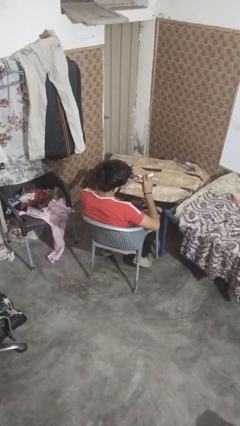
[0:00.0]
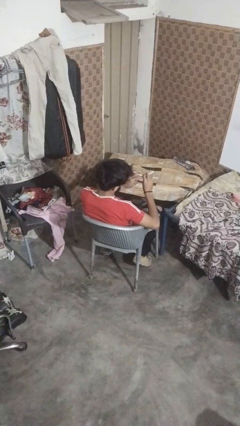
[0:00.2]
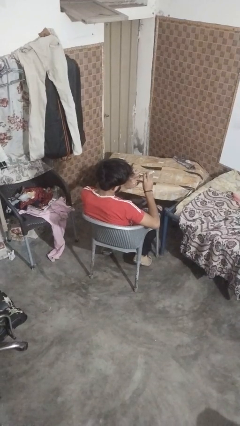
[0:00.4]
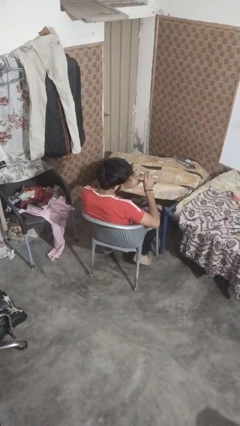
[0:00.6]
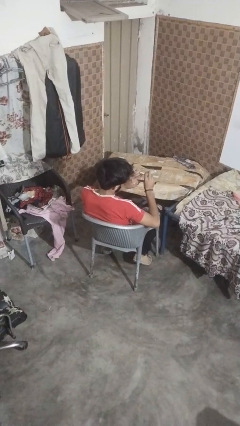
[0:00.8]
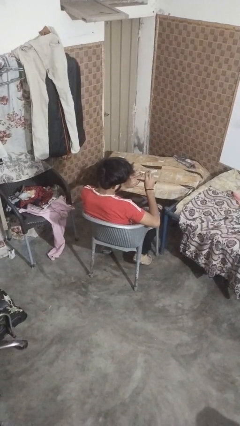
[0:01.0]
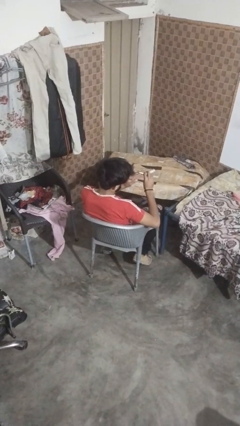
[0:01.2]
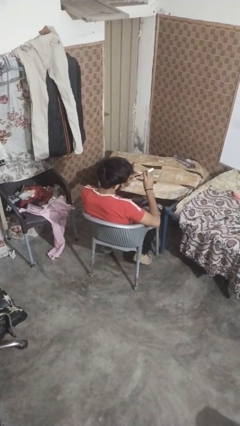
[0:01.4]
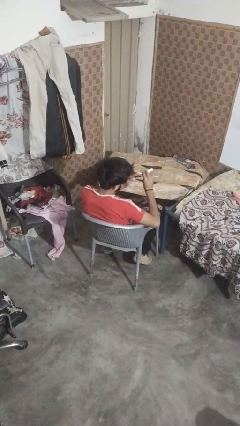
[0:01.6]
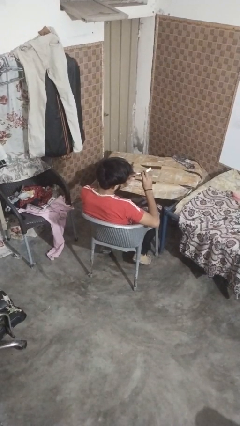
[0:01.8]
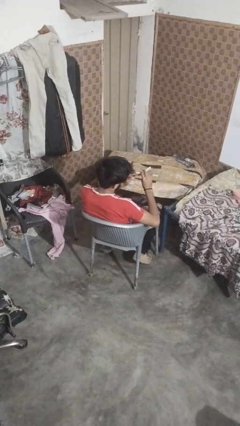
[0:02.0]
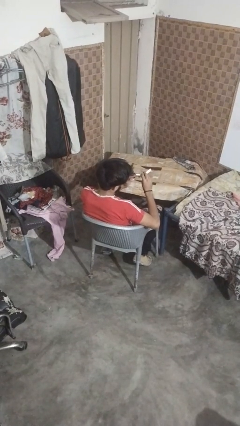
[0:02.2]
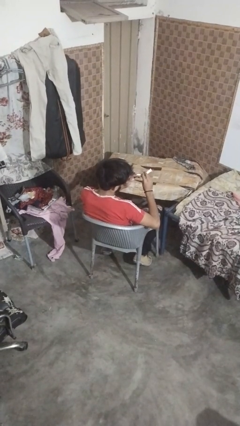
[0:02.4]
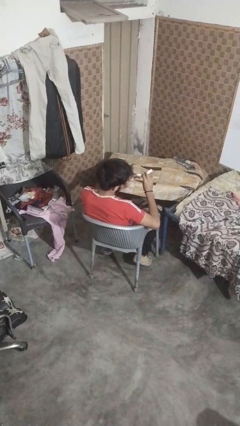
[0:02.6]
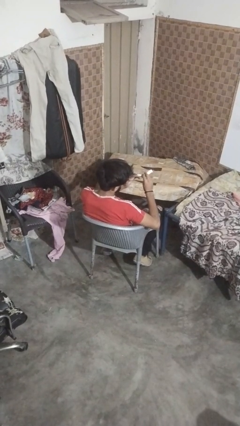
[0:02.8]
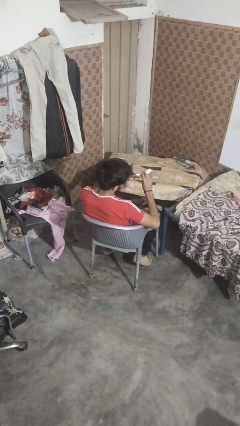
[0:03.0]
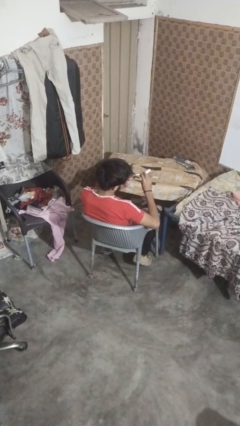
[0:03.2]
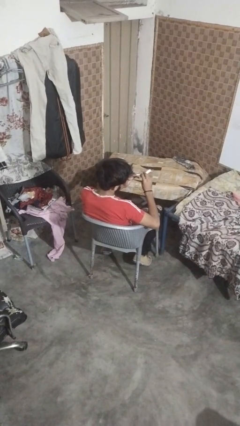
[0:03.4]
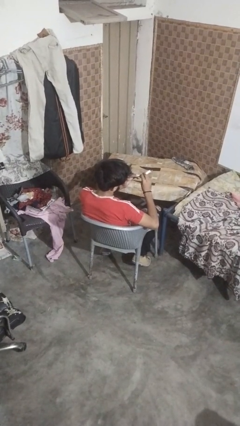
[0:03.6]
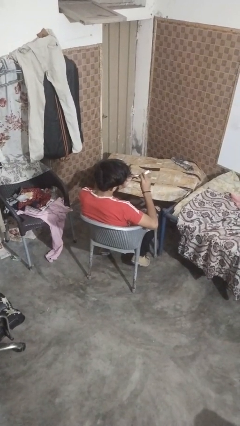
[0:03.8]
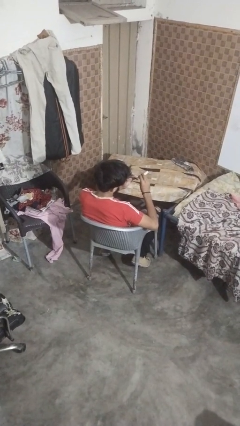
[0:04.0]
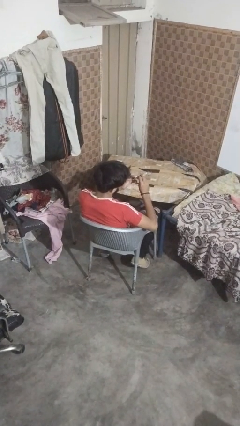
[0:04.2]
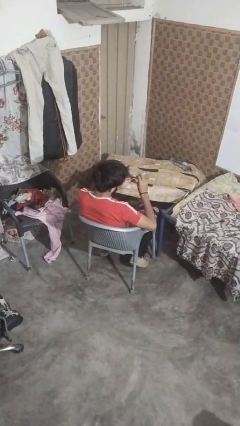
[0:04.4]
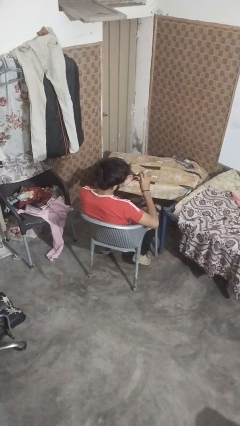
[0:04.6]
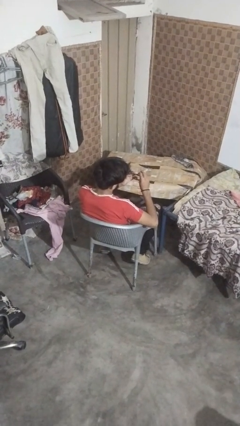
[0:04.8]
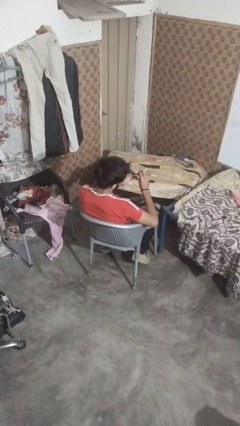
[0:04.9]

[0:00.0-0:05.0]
person files fingernails

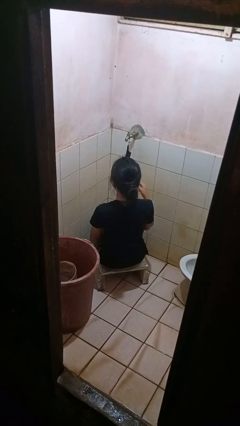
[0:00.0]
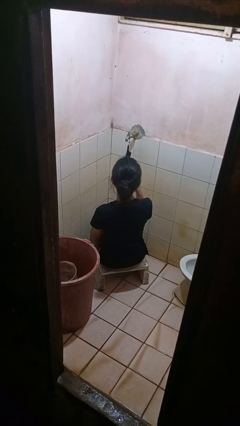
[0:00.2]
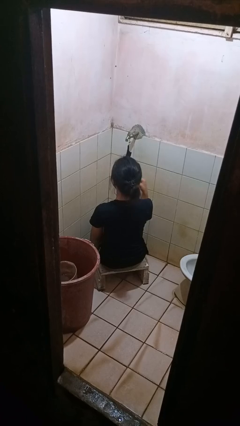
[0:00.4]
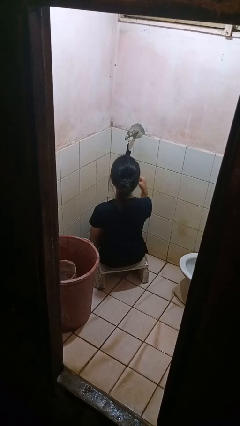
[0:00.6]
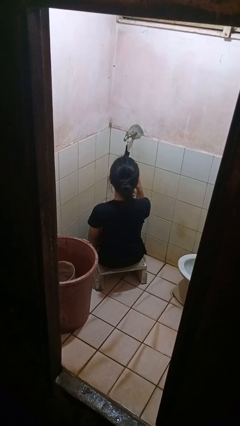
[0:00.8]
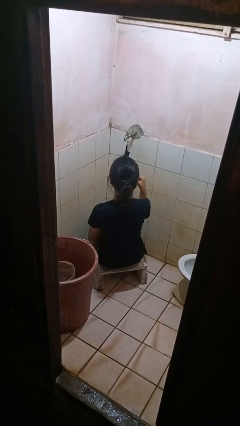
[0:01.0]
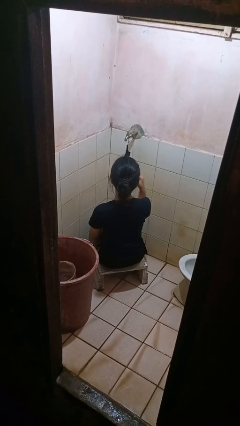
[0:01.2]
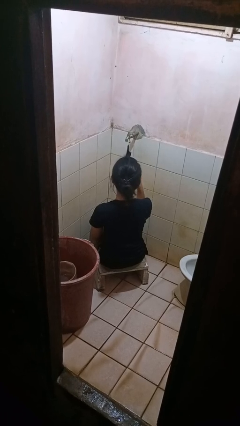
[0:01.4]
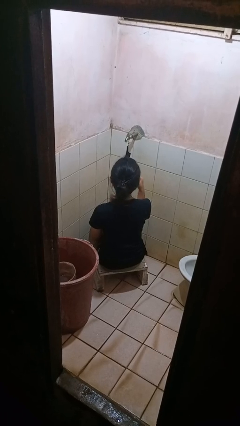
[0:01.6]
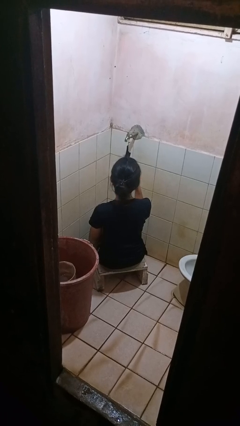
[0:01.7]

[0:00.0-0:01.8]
person brushes teeth

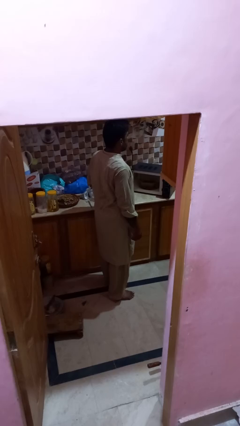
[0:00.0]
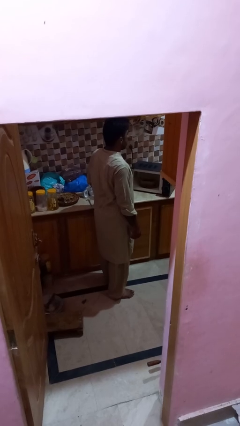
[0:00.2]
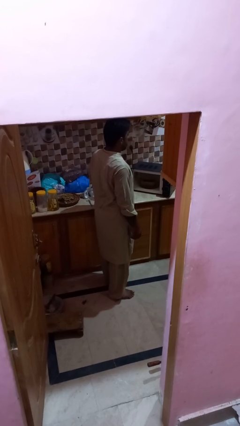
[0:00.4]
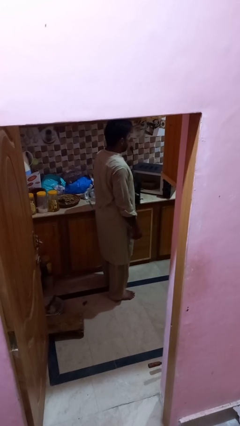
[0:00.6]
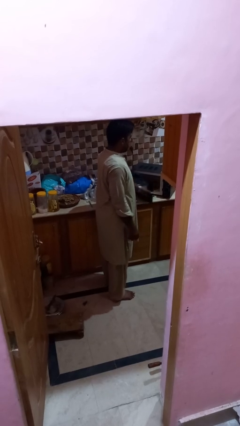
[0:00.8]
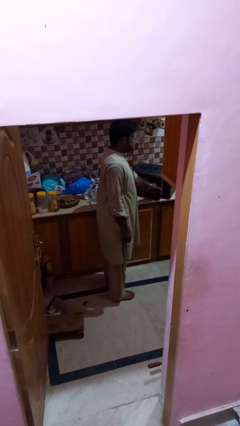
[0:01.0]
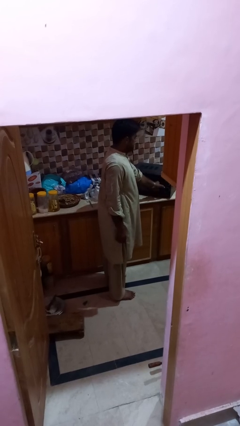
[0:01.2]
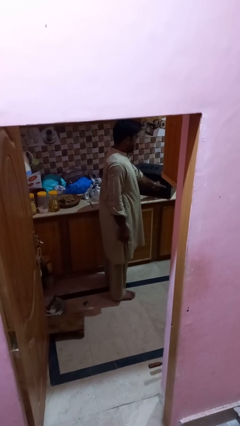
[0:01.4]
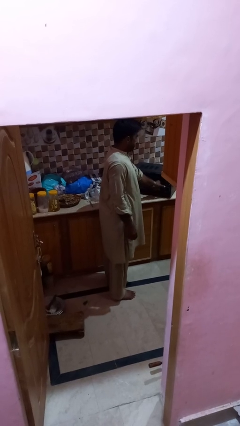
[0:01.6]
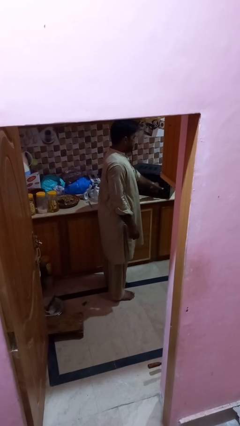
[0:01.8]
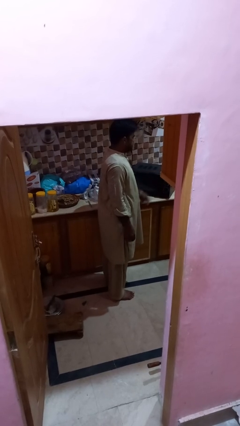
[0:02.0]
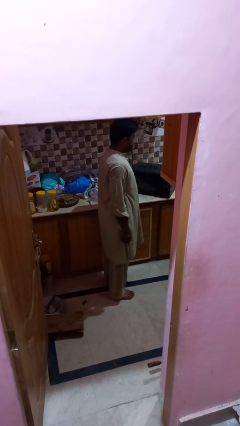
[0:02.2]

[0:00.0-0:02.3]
person closes microwave

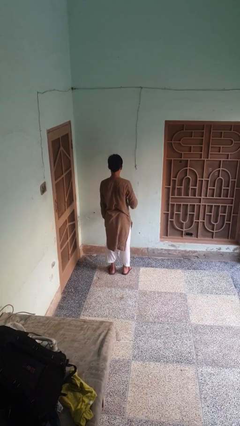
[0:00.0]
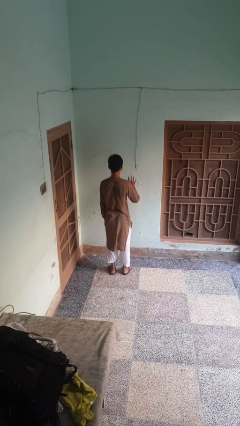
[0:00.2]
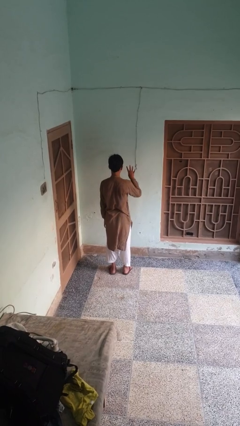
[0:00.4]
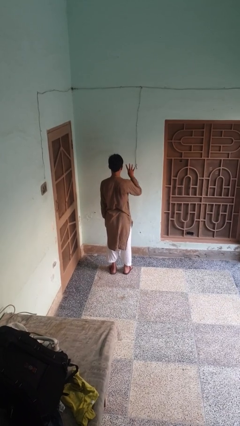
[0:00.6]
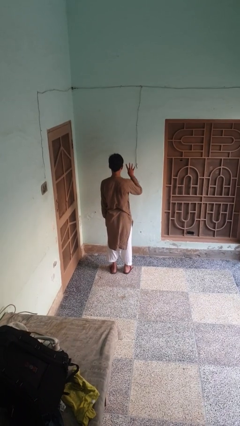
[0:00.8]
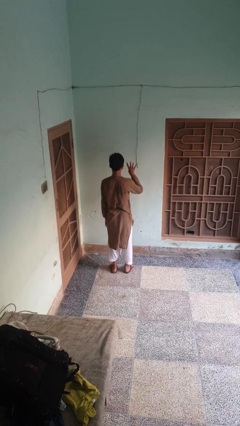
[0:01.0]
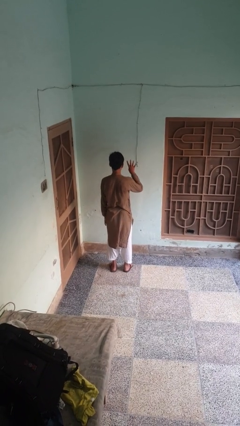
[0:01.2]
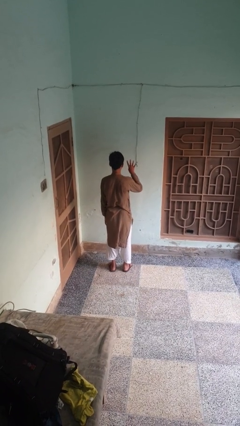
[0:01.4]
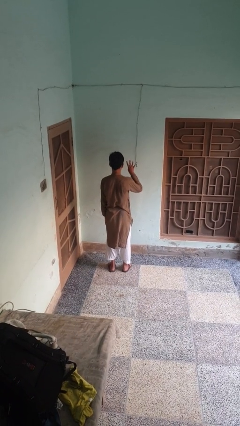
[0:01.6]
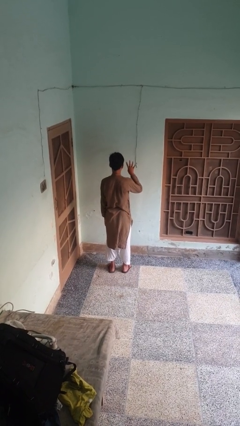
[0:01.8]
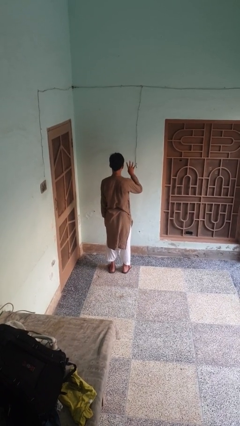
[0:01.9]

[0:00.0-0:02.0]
person gestures number four

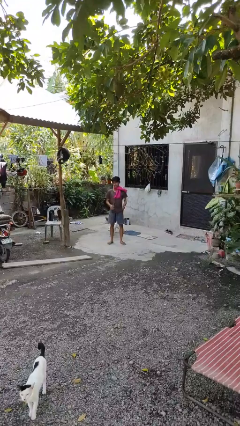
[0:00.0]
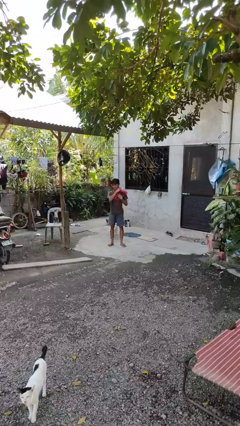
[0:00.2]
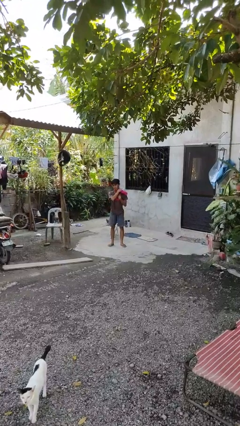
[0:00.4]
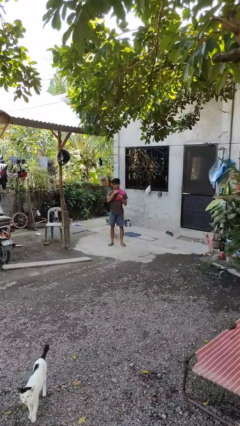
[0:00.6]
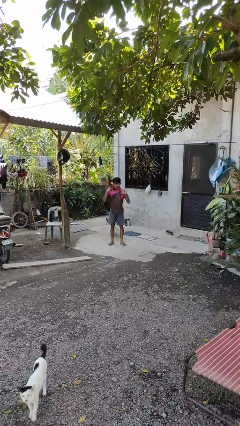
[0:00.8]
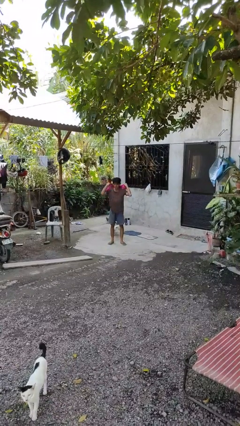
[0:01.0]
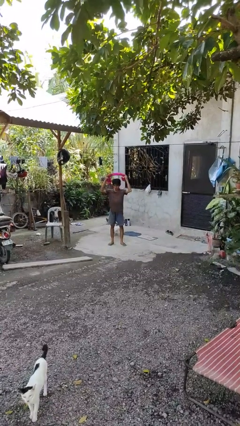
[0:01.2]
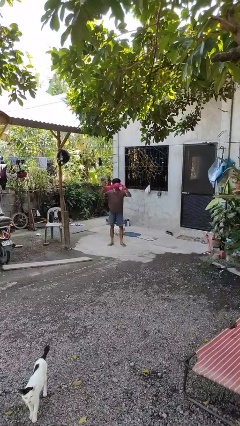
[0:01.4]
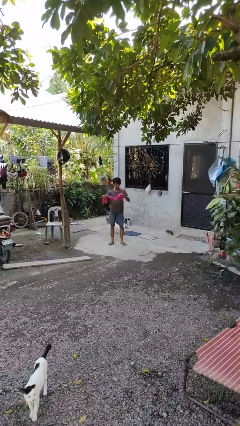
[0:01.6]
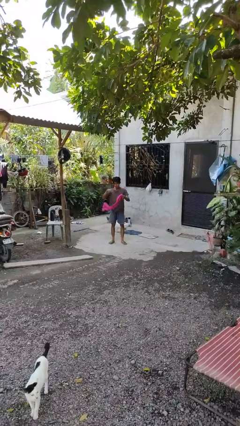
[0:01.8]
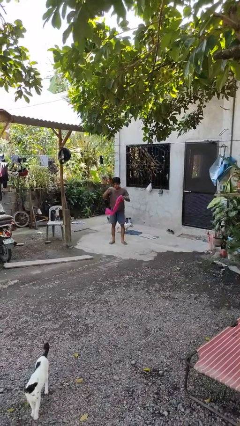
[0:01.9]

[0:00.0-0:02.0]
person takes off scarf

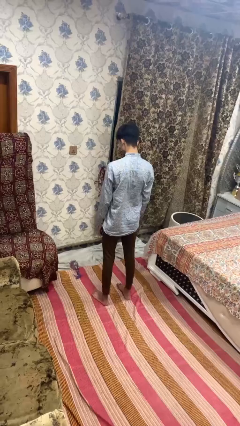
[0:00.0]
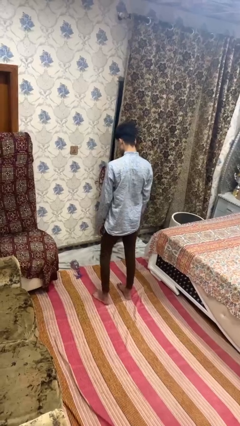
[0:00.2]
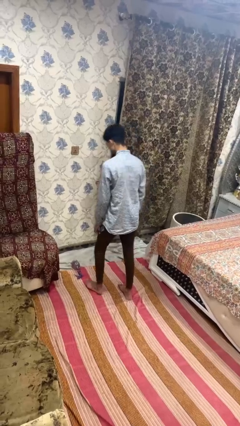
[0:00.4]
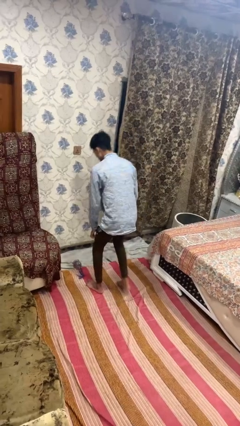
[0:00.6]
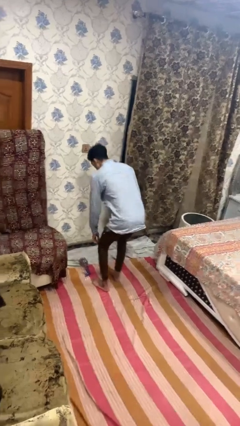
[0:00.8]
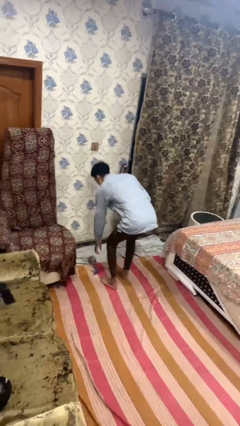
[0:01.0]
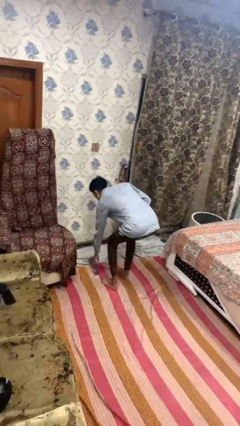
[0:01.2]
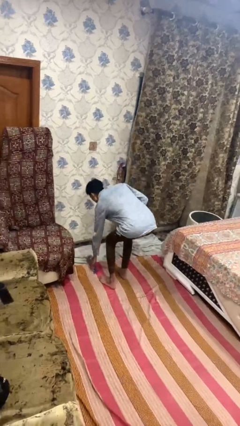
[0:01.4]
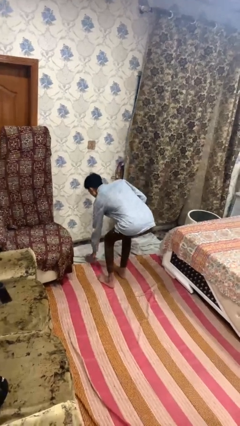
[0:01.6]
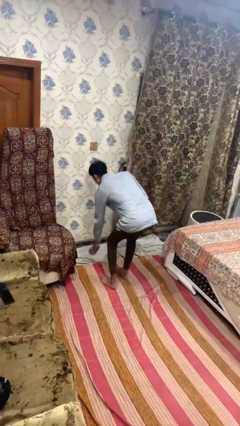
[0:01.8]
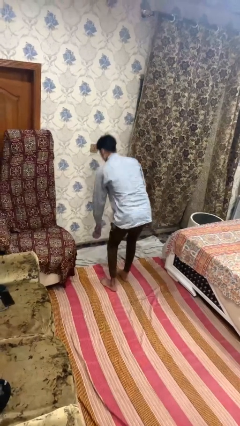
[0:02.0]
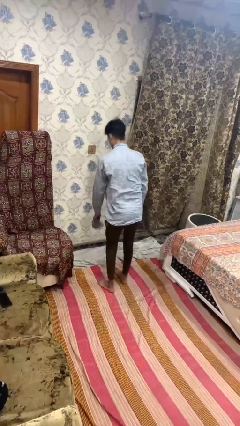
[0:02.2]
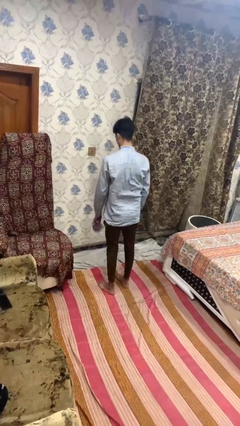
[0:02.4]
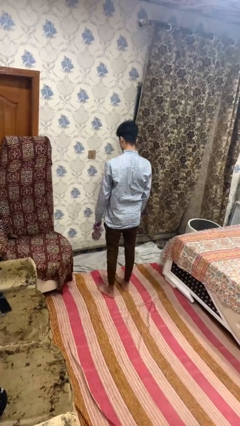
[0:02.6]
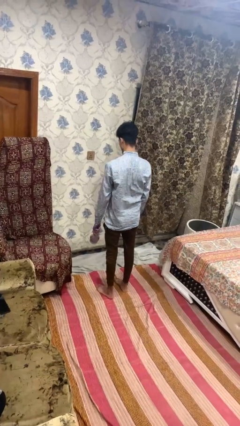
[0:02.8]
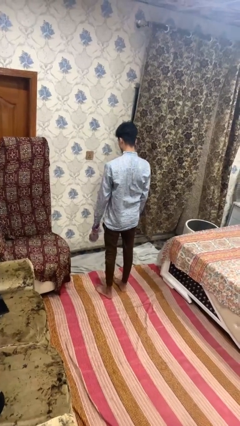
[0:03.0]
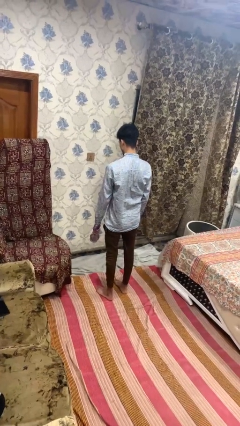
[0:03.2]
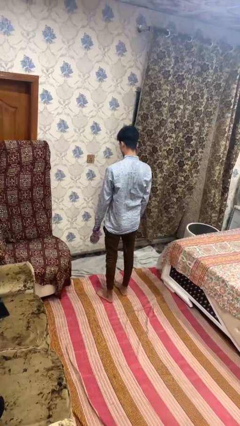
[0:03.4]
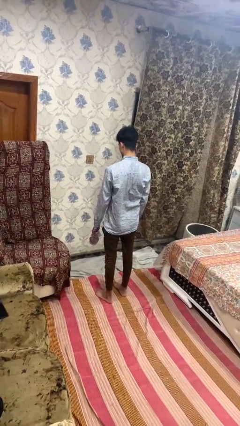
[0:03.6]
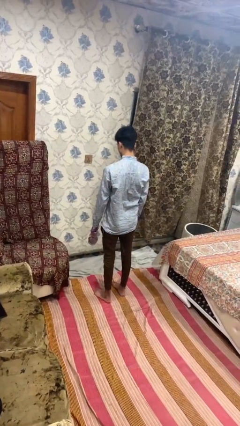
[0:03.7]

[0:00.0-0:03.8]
person picks up object from floor

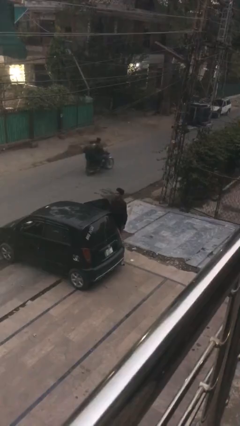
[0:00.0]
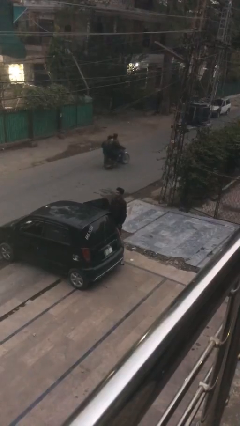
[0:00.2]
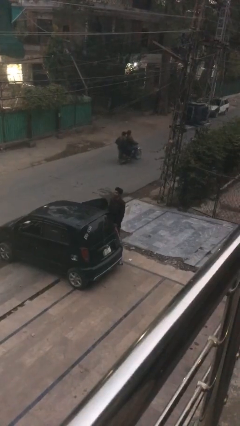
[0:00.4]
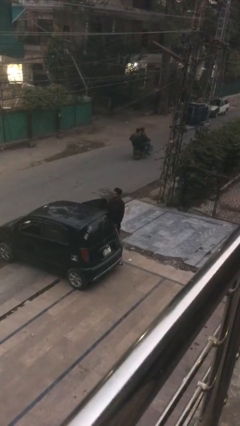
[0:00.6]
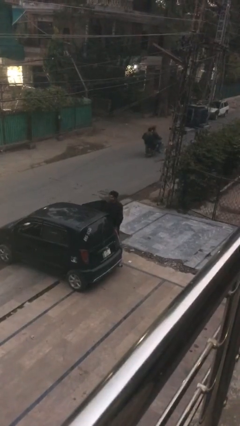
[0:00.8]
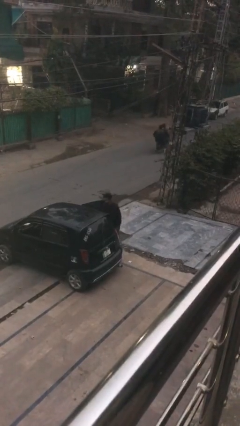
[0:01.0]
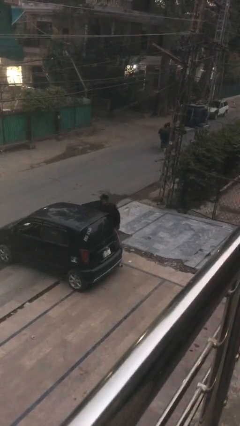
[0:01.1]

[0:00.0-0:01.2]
person unloads car
